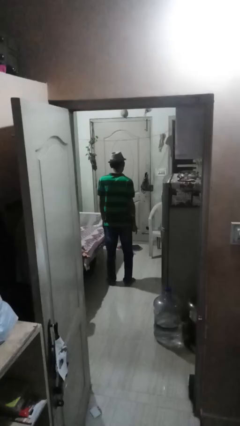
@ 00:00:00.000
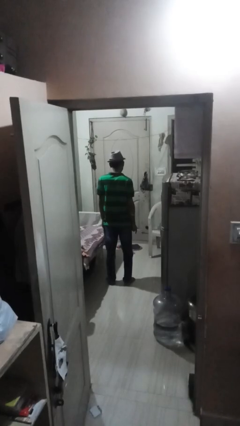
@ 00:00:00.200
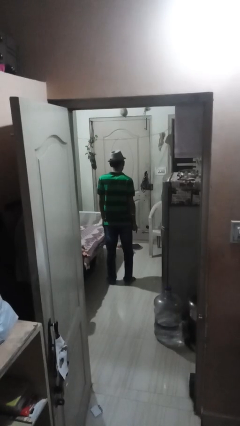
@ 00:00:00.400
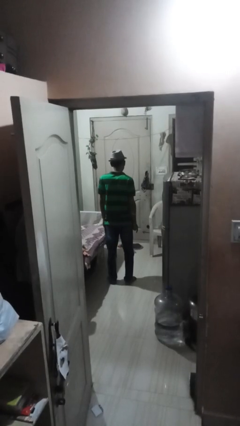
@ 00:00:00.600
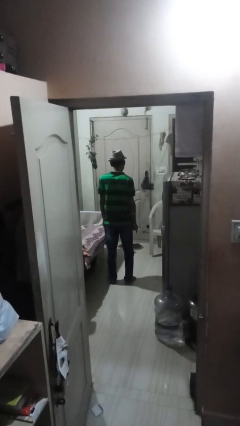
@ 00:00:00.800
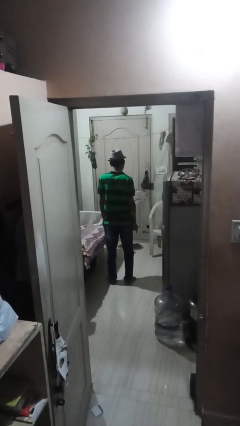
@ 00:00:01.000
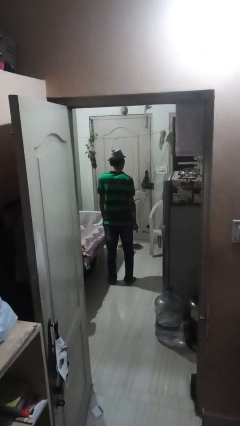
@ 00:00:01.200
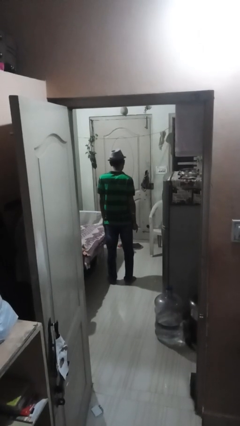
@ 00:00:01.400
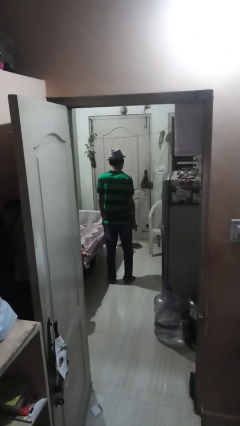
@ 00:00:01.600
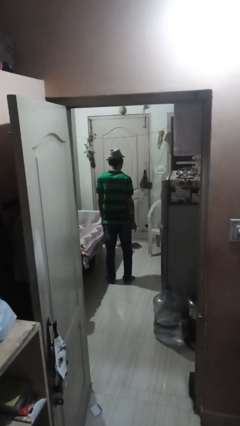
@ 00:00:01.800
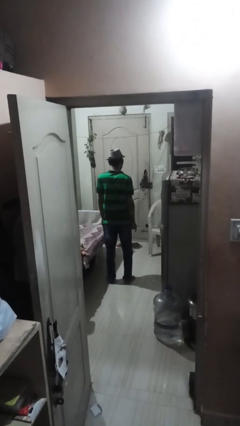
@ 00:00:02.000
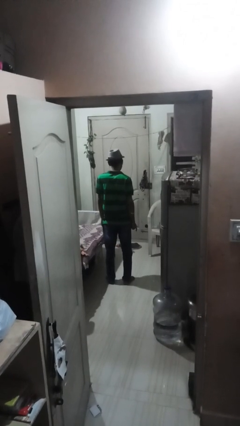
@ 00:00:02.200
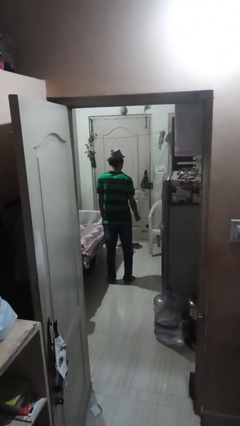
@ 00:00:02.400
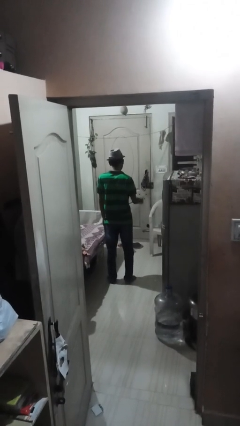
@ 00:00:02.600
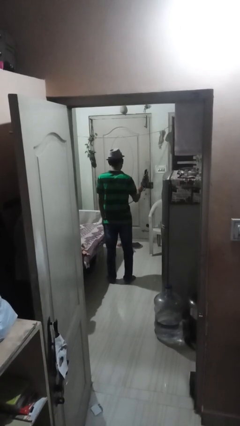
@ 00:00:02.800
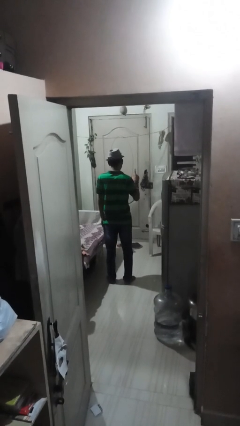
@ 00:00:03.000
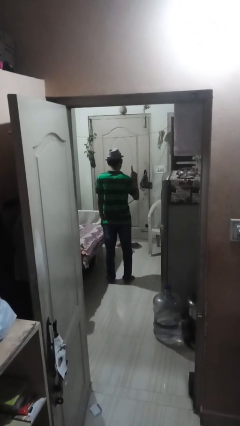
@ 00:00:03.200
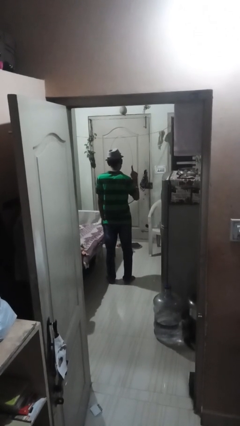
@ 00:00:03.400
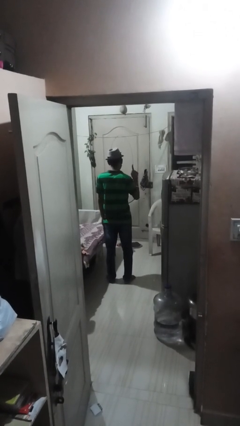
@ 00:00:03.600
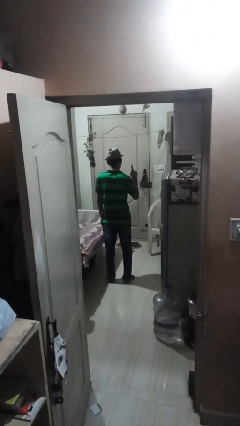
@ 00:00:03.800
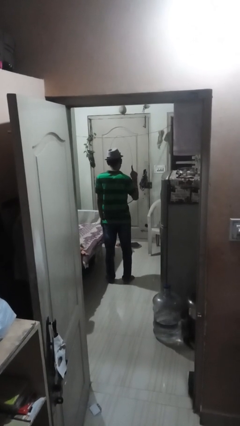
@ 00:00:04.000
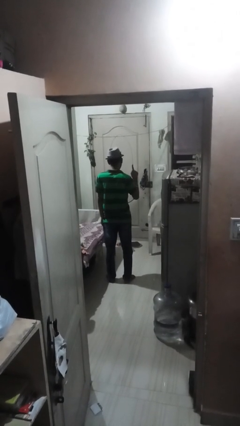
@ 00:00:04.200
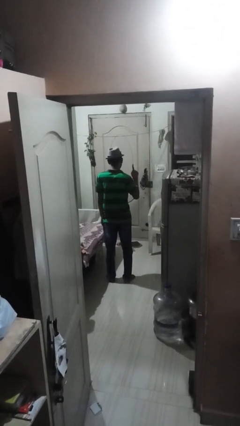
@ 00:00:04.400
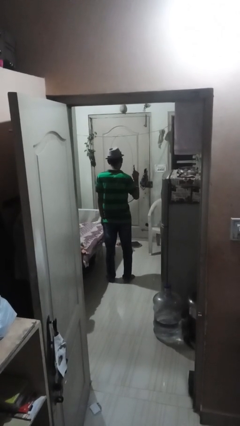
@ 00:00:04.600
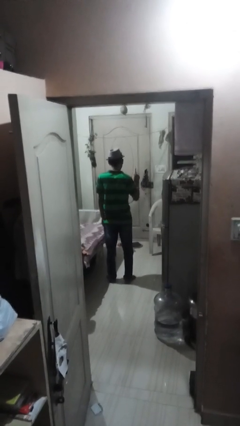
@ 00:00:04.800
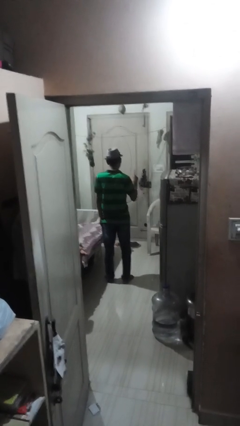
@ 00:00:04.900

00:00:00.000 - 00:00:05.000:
person gestures number one

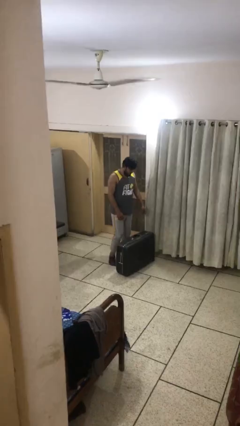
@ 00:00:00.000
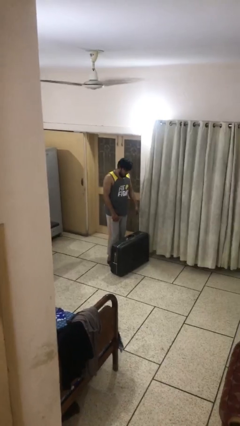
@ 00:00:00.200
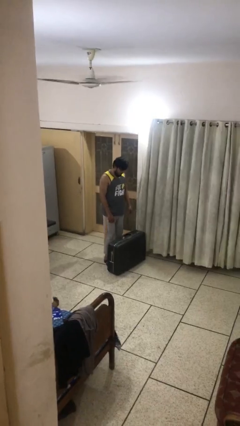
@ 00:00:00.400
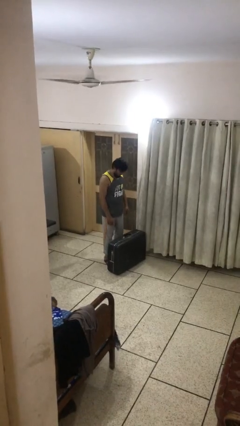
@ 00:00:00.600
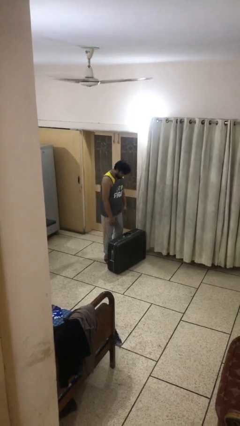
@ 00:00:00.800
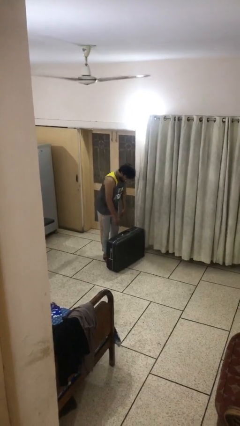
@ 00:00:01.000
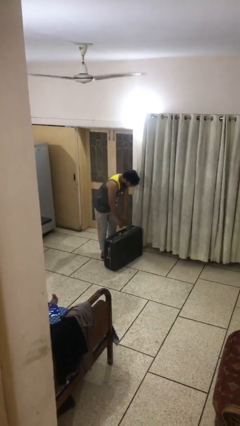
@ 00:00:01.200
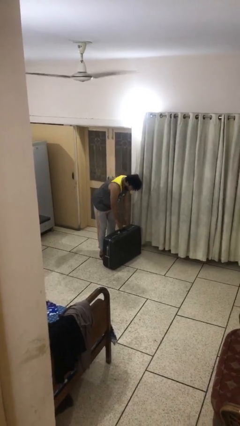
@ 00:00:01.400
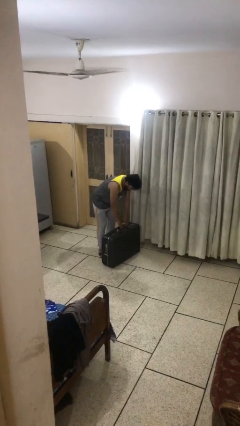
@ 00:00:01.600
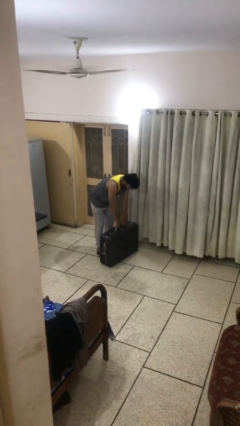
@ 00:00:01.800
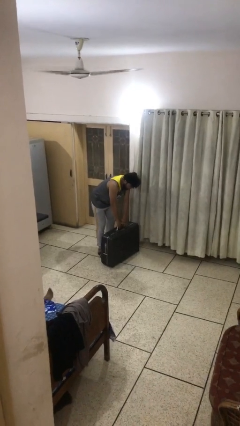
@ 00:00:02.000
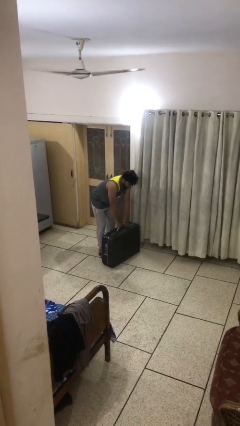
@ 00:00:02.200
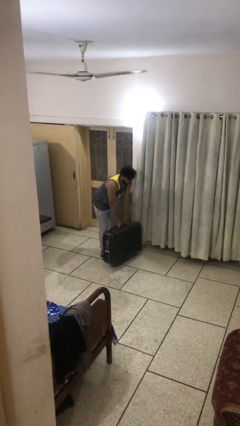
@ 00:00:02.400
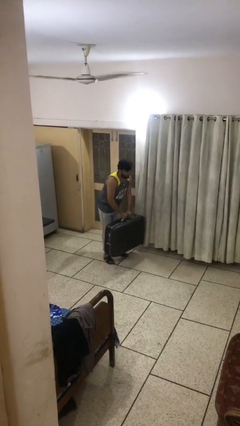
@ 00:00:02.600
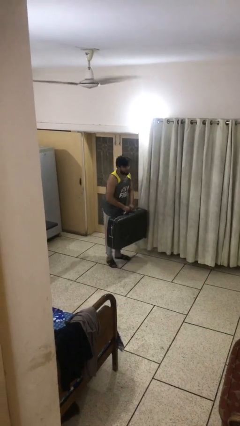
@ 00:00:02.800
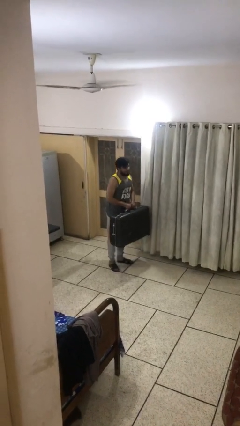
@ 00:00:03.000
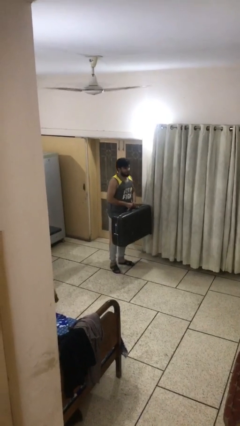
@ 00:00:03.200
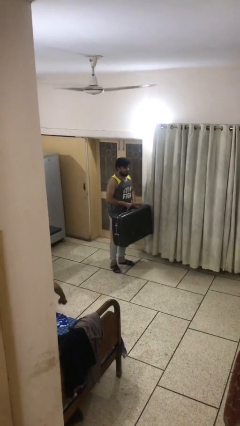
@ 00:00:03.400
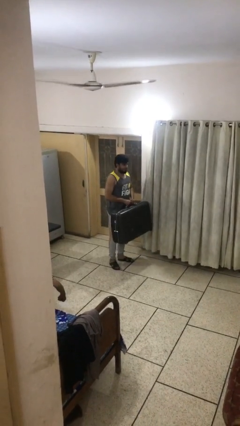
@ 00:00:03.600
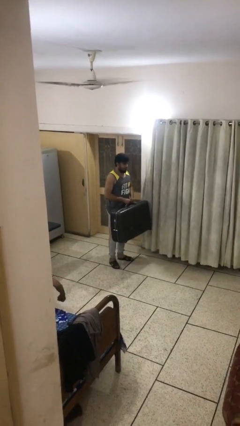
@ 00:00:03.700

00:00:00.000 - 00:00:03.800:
person picks up object from floor

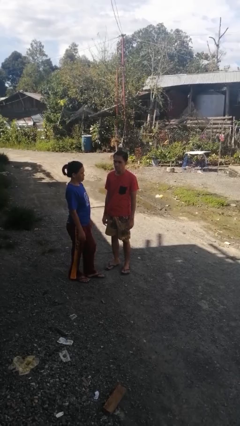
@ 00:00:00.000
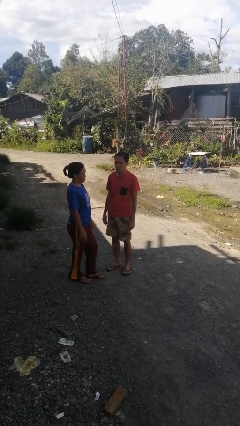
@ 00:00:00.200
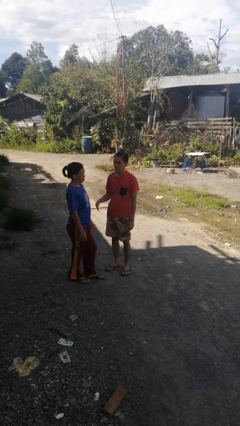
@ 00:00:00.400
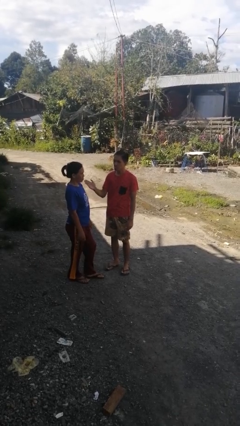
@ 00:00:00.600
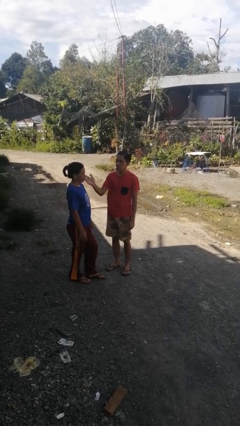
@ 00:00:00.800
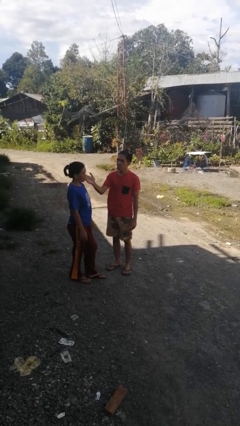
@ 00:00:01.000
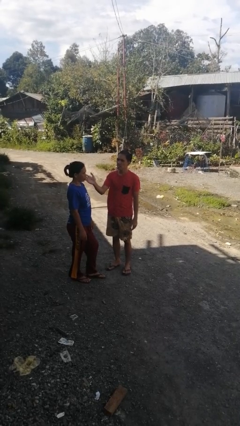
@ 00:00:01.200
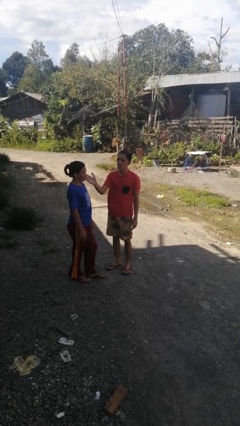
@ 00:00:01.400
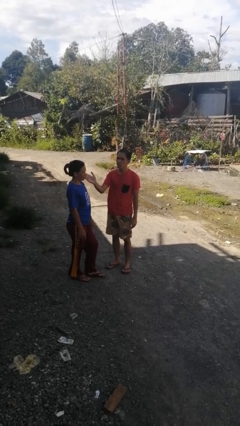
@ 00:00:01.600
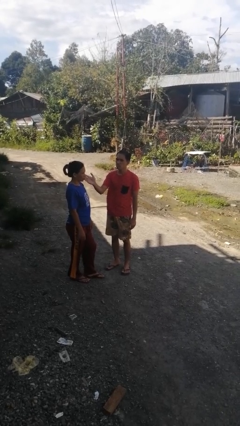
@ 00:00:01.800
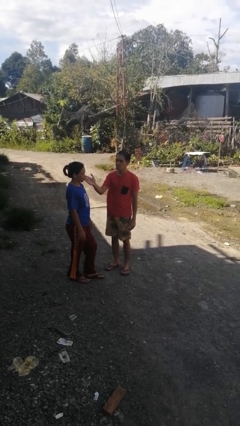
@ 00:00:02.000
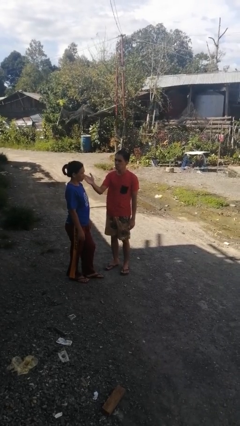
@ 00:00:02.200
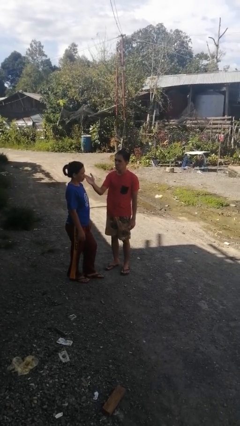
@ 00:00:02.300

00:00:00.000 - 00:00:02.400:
person touches face of person

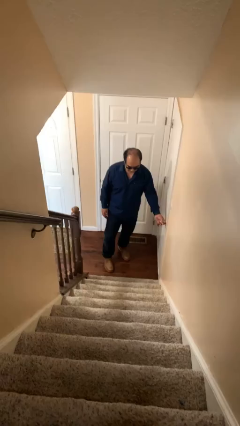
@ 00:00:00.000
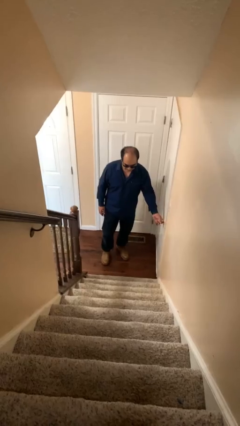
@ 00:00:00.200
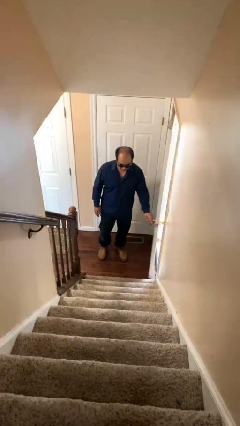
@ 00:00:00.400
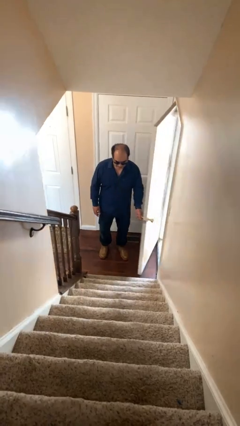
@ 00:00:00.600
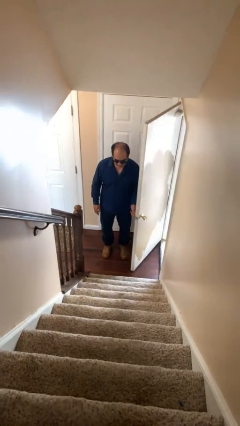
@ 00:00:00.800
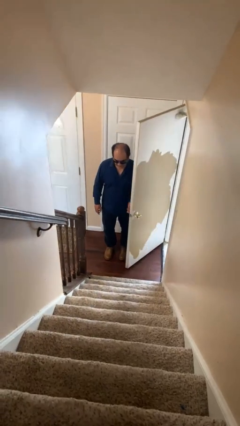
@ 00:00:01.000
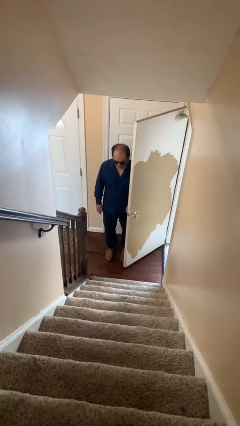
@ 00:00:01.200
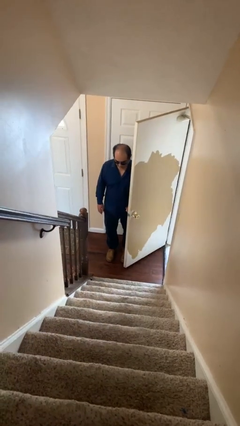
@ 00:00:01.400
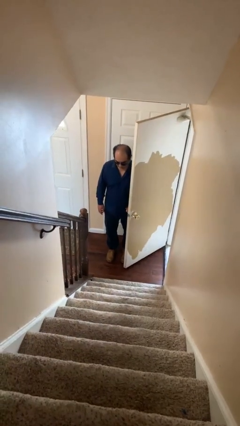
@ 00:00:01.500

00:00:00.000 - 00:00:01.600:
person opens facility door

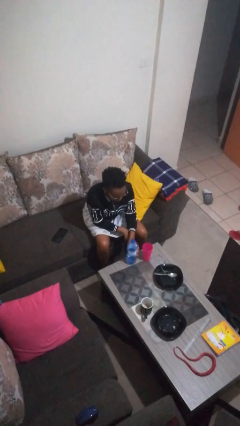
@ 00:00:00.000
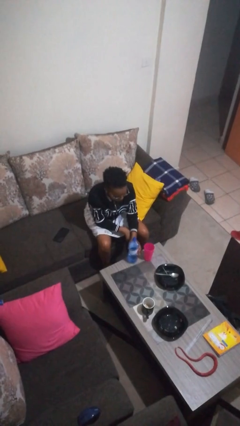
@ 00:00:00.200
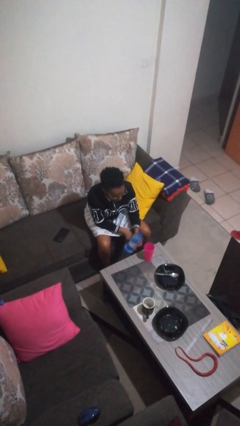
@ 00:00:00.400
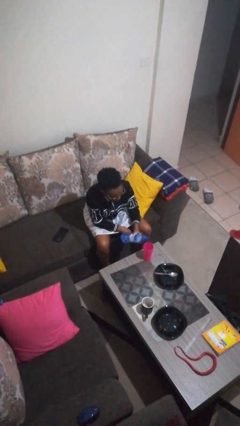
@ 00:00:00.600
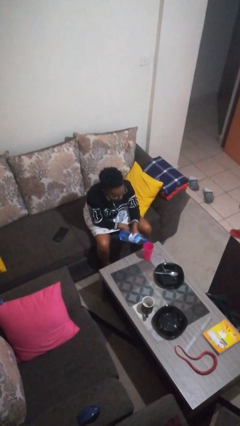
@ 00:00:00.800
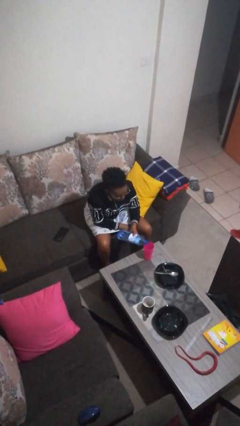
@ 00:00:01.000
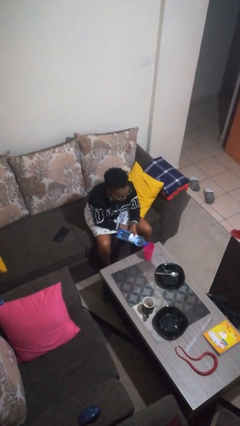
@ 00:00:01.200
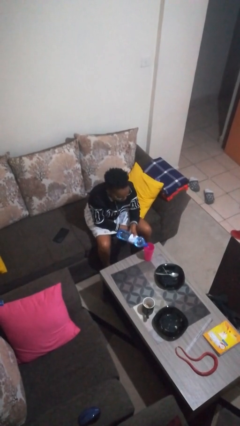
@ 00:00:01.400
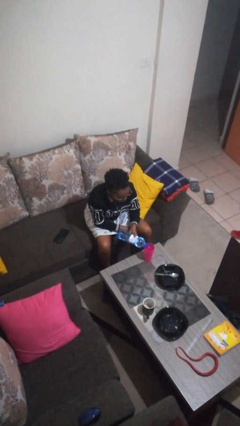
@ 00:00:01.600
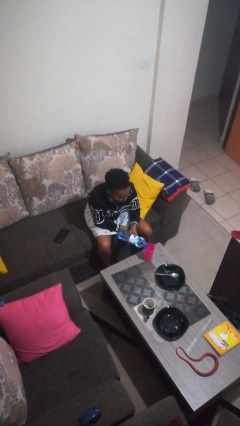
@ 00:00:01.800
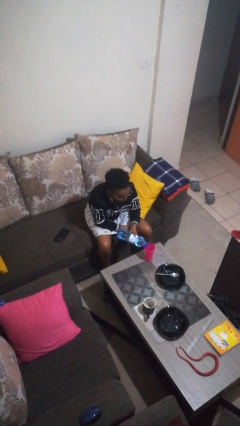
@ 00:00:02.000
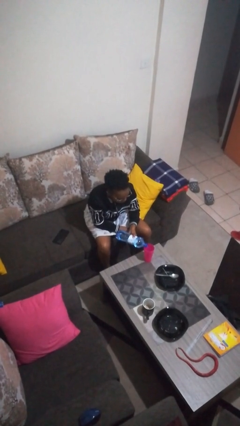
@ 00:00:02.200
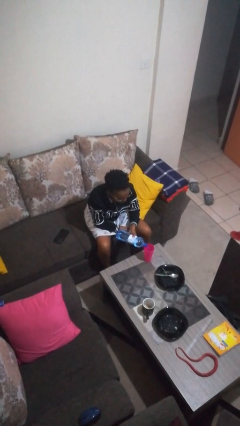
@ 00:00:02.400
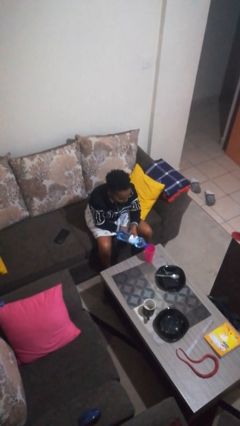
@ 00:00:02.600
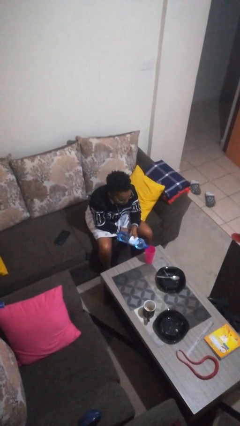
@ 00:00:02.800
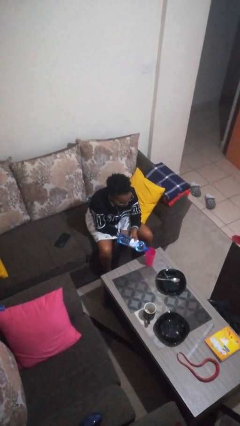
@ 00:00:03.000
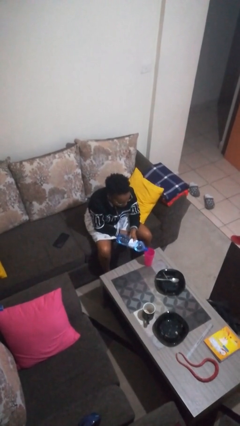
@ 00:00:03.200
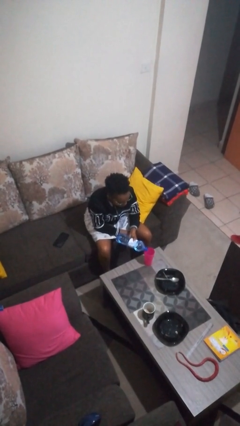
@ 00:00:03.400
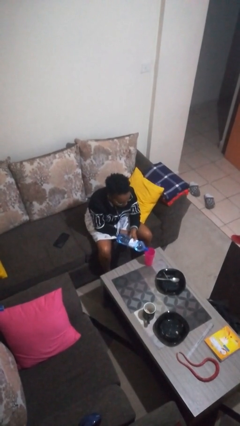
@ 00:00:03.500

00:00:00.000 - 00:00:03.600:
person pours liquid into cup

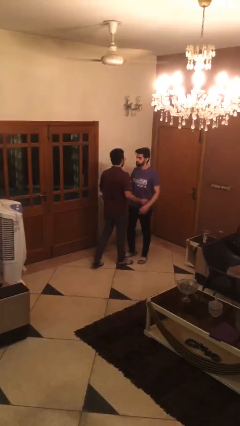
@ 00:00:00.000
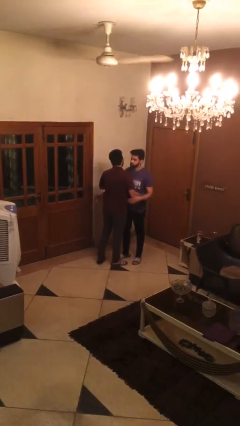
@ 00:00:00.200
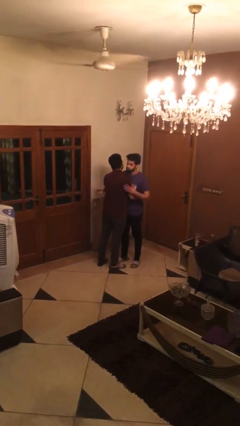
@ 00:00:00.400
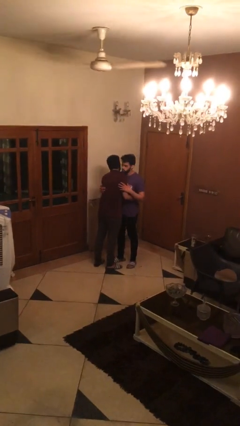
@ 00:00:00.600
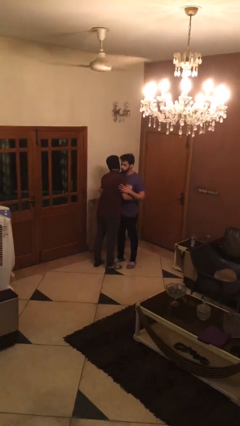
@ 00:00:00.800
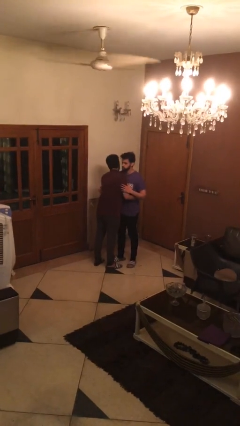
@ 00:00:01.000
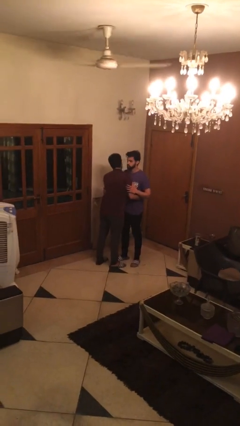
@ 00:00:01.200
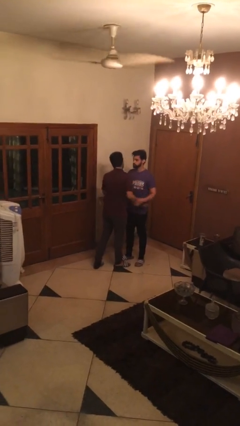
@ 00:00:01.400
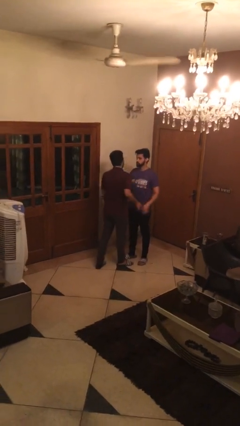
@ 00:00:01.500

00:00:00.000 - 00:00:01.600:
person embraces person
